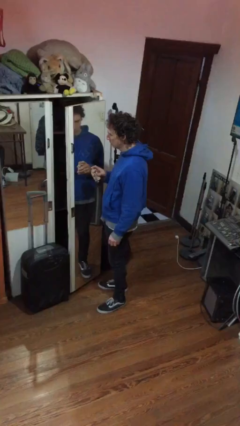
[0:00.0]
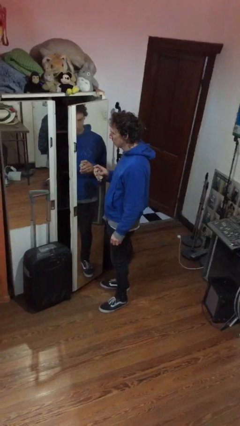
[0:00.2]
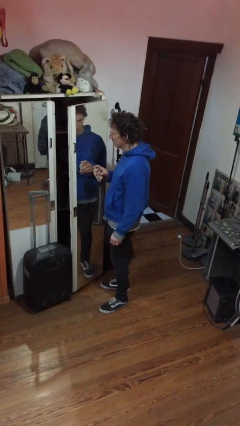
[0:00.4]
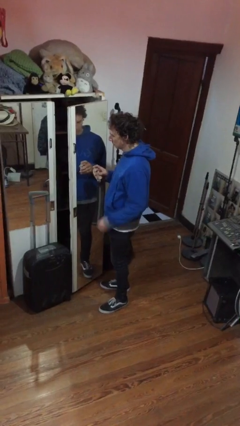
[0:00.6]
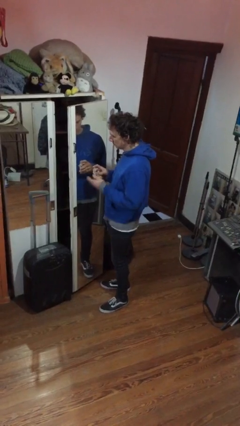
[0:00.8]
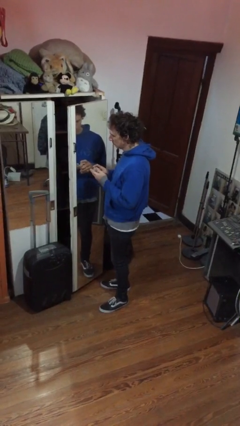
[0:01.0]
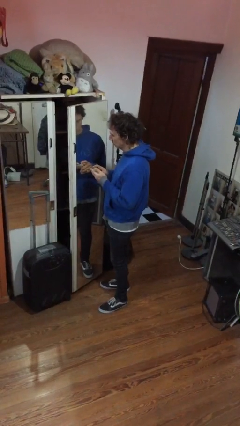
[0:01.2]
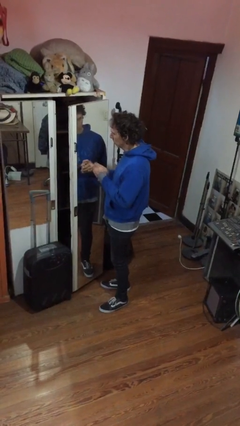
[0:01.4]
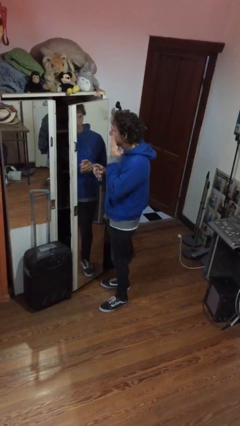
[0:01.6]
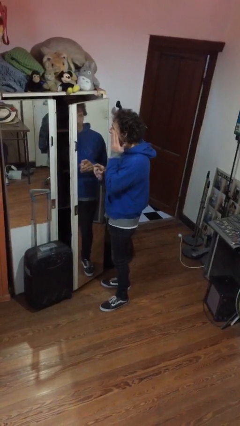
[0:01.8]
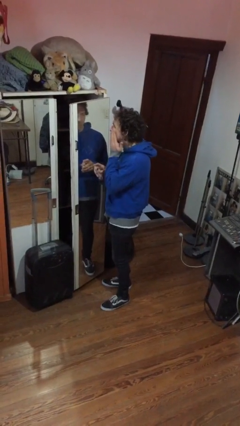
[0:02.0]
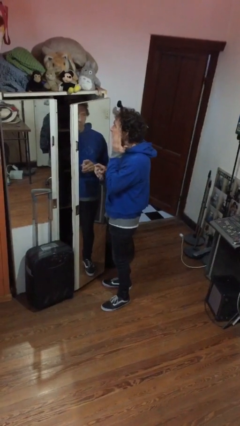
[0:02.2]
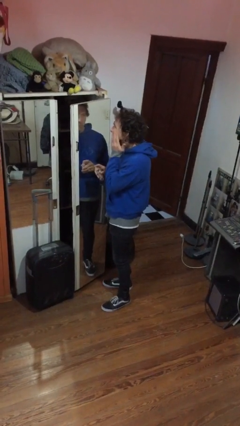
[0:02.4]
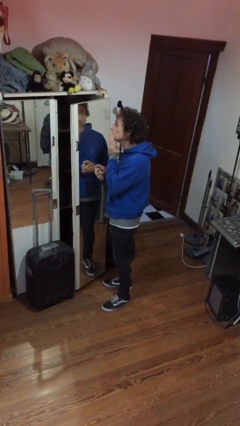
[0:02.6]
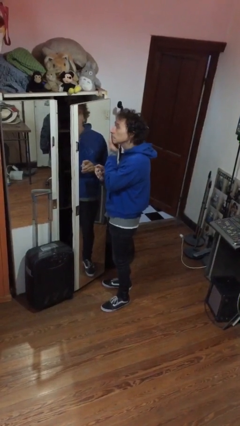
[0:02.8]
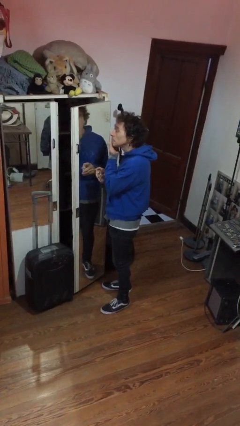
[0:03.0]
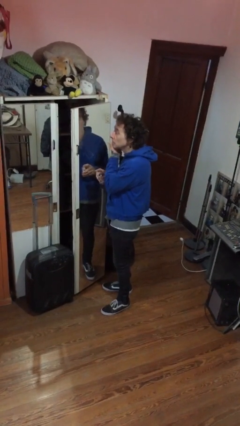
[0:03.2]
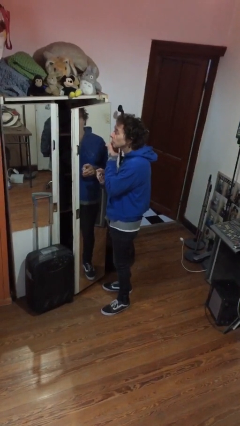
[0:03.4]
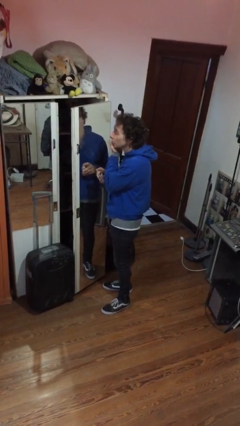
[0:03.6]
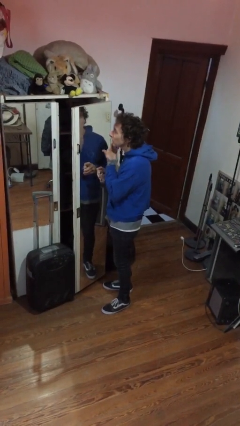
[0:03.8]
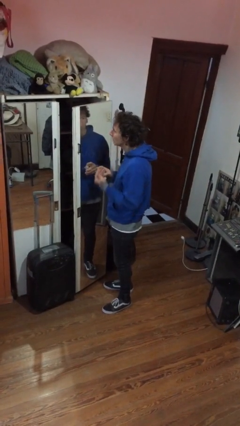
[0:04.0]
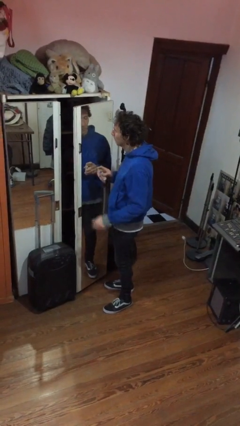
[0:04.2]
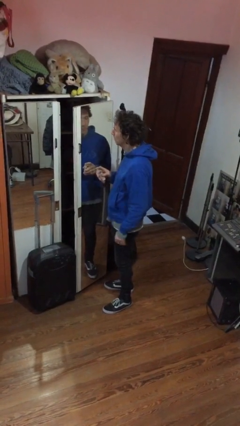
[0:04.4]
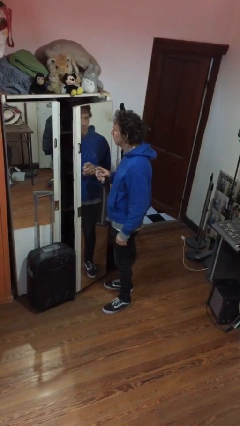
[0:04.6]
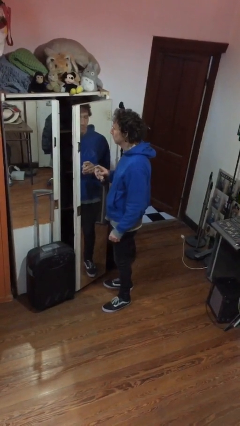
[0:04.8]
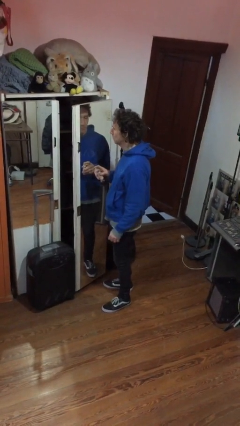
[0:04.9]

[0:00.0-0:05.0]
person applies foundation makeup

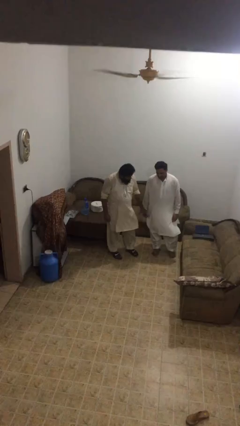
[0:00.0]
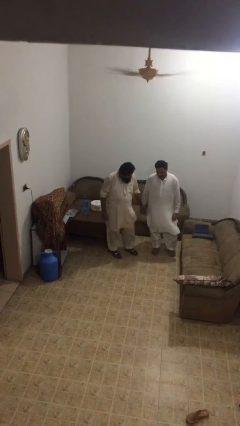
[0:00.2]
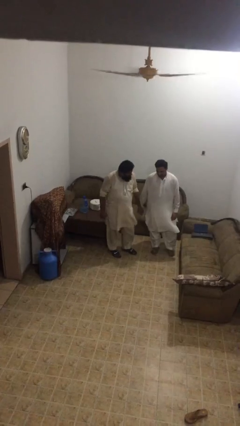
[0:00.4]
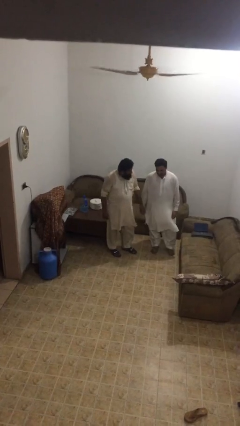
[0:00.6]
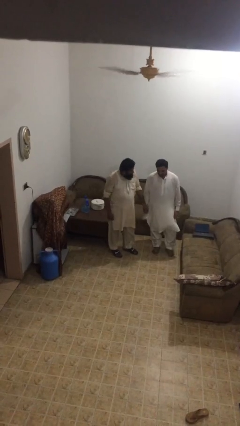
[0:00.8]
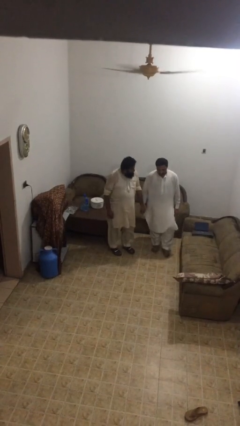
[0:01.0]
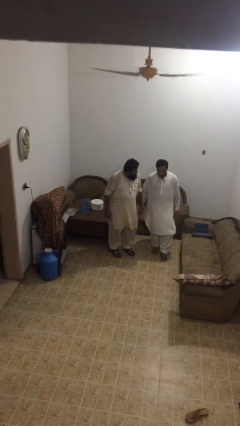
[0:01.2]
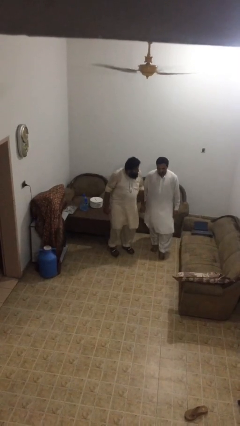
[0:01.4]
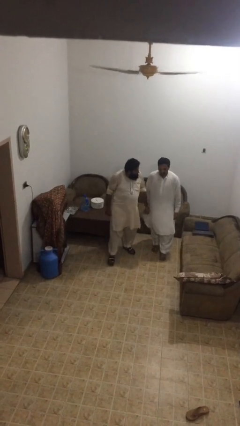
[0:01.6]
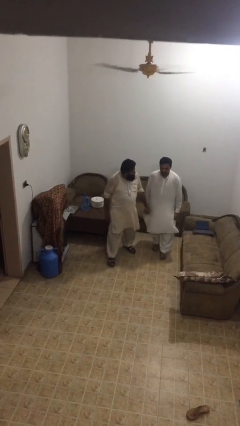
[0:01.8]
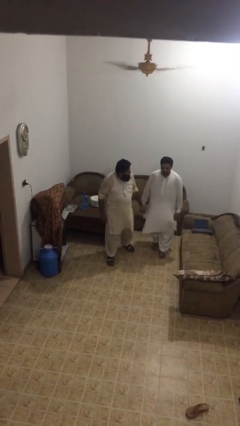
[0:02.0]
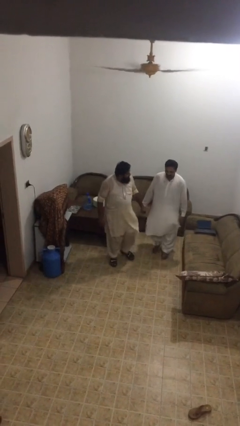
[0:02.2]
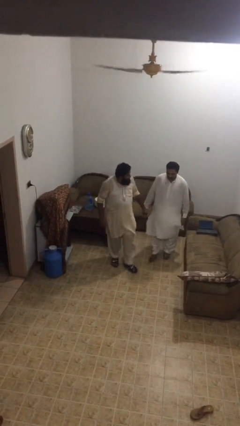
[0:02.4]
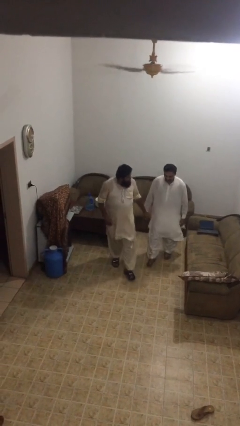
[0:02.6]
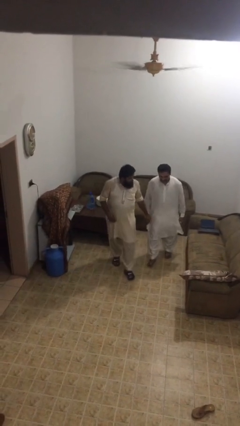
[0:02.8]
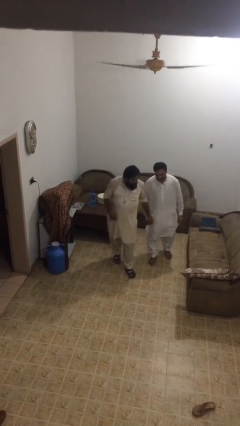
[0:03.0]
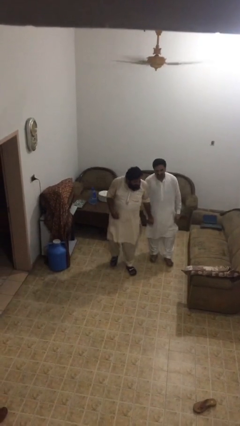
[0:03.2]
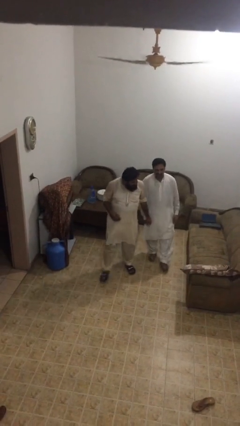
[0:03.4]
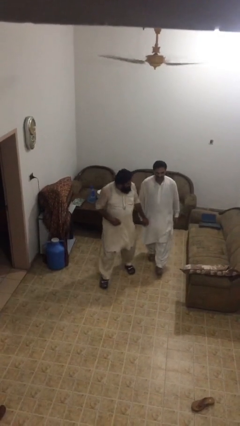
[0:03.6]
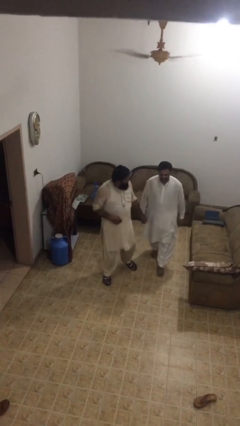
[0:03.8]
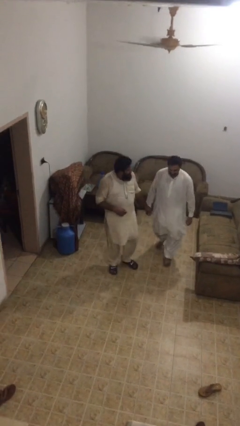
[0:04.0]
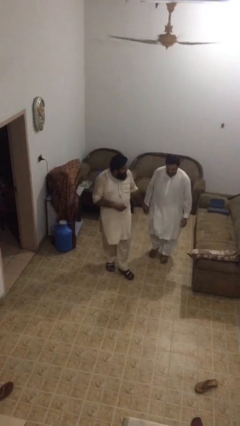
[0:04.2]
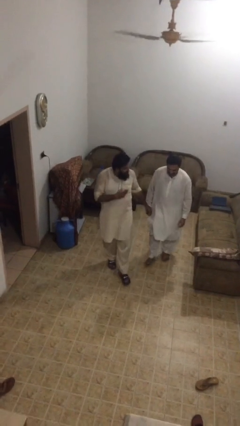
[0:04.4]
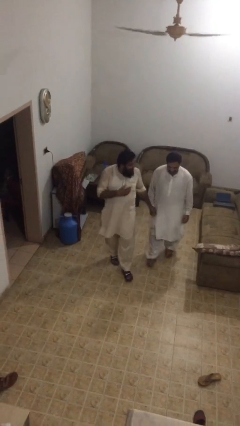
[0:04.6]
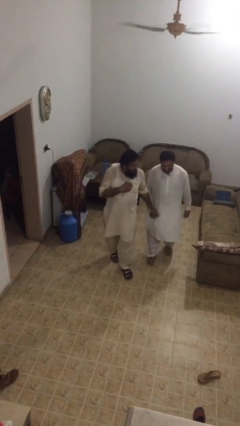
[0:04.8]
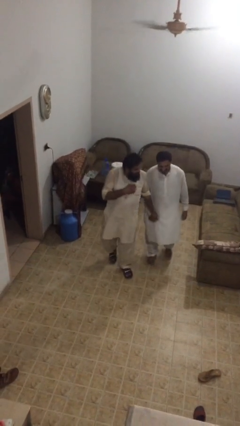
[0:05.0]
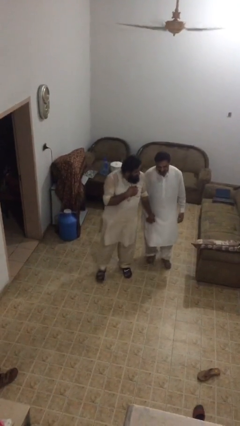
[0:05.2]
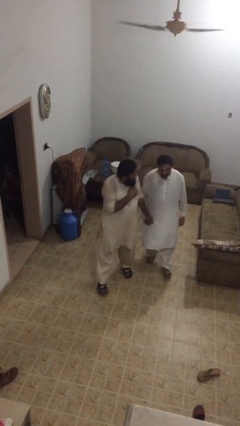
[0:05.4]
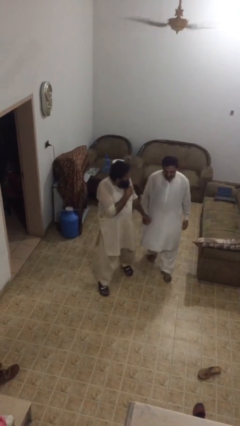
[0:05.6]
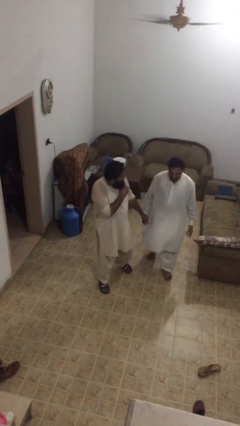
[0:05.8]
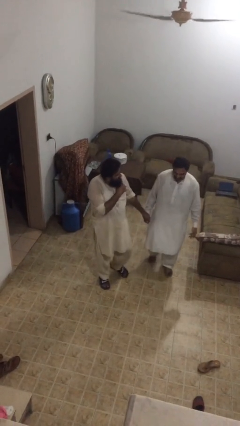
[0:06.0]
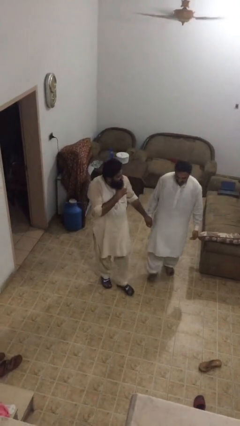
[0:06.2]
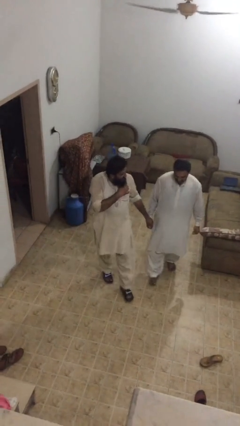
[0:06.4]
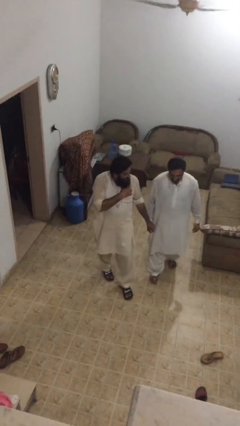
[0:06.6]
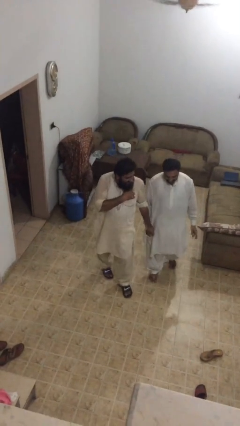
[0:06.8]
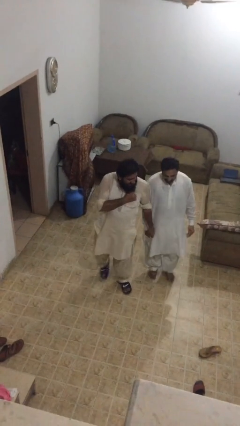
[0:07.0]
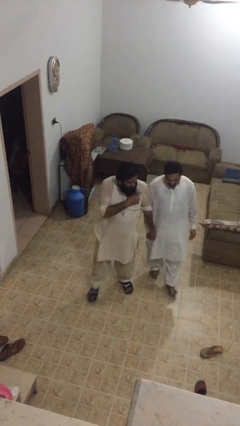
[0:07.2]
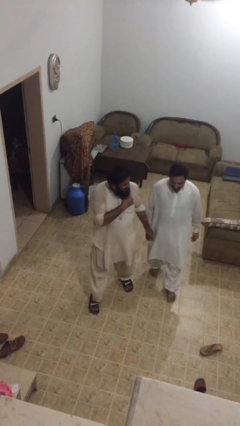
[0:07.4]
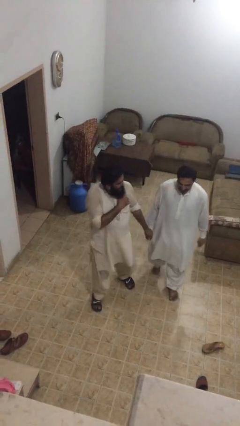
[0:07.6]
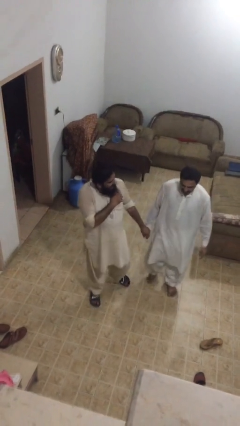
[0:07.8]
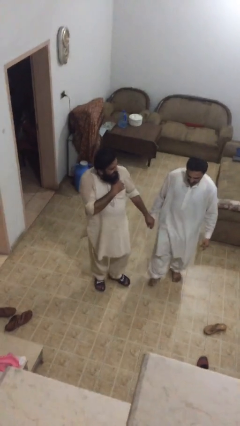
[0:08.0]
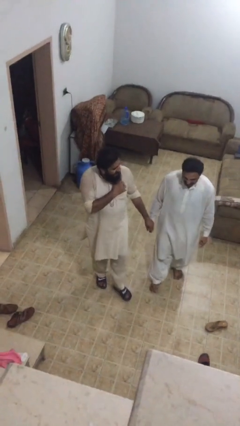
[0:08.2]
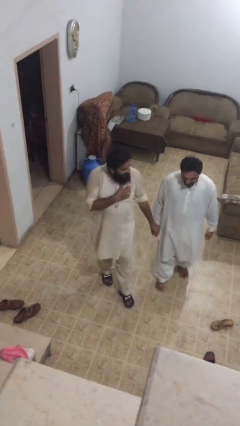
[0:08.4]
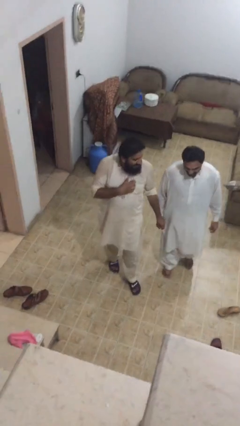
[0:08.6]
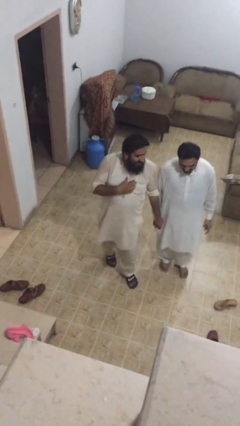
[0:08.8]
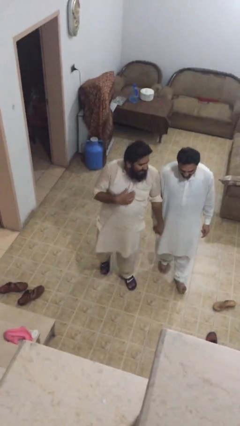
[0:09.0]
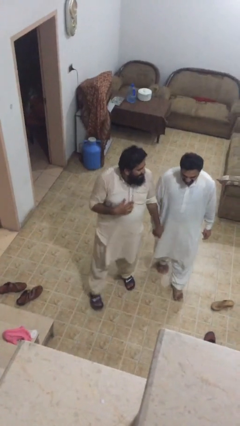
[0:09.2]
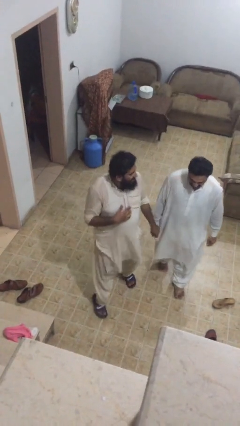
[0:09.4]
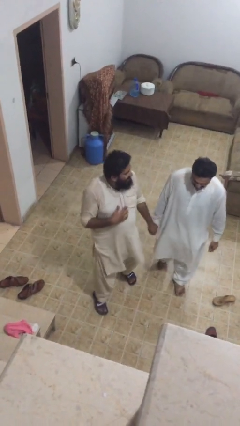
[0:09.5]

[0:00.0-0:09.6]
person holds hand

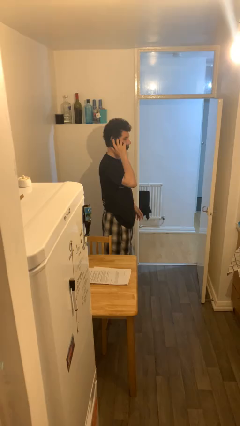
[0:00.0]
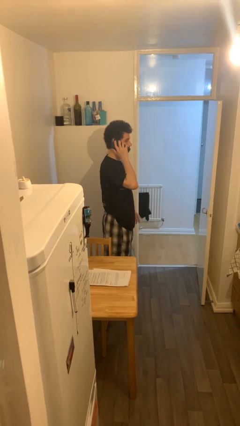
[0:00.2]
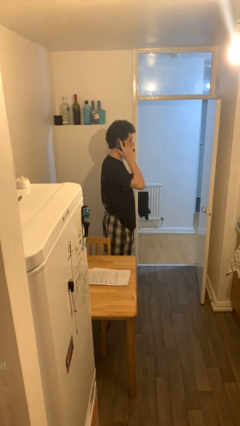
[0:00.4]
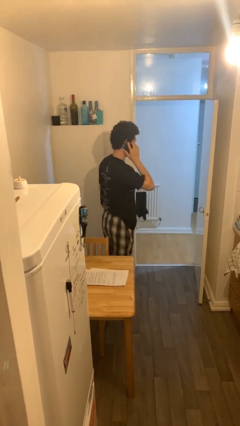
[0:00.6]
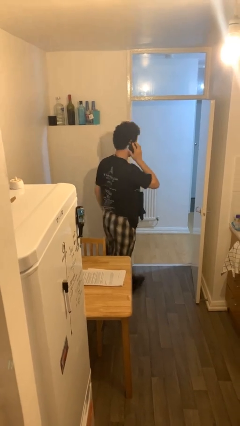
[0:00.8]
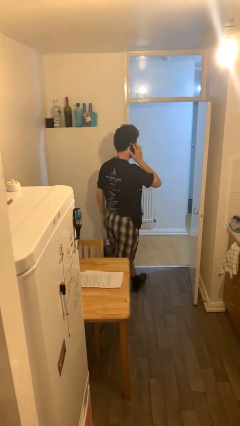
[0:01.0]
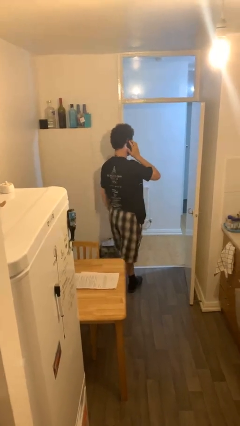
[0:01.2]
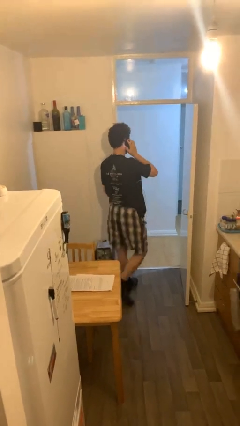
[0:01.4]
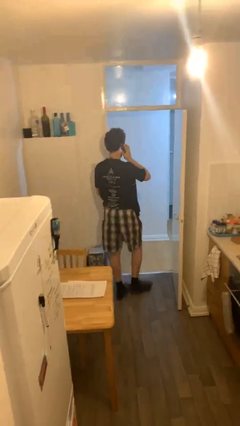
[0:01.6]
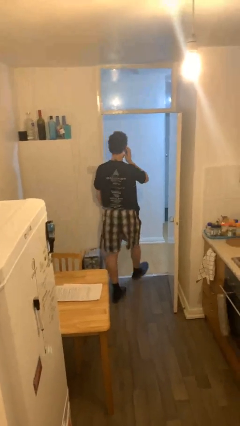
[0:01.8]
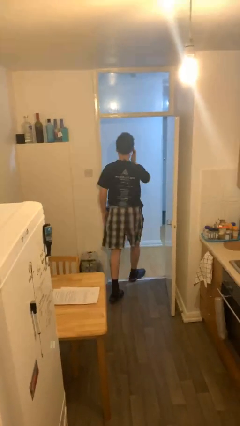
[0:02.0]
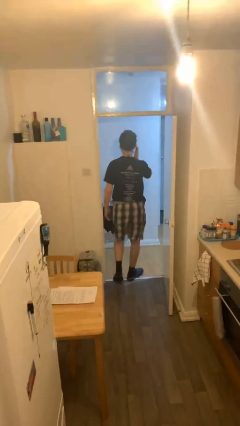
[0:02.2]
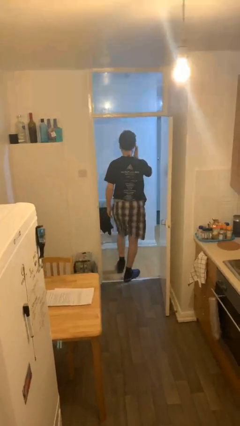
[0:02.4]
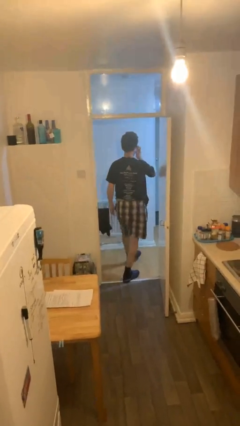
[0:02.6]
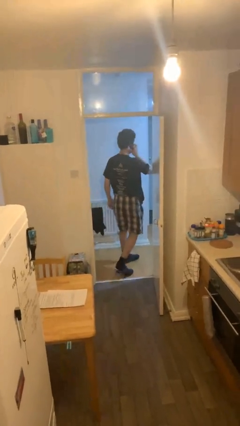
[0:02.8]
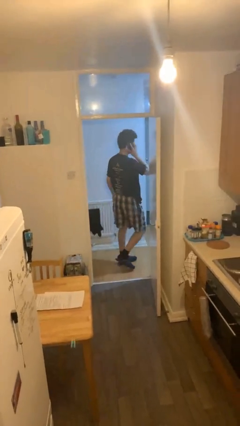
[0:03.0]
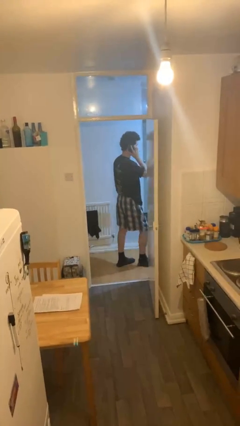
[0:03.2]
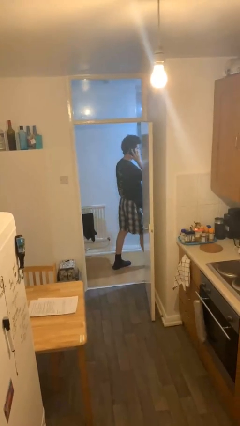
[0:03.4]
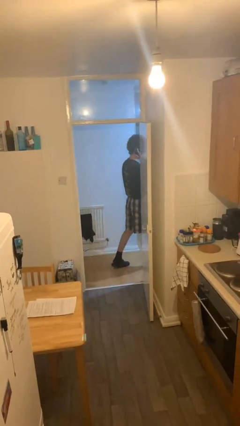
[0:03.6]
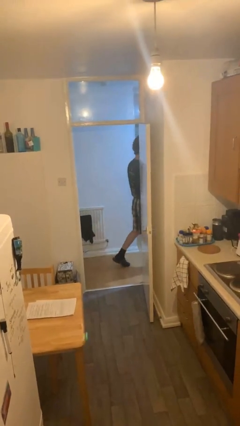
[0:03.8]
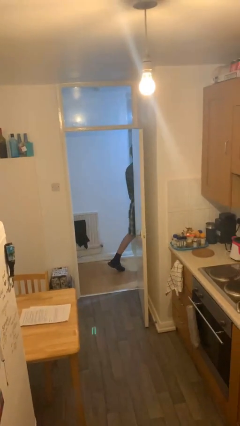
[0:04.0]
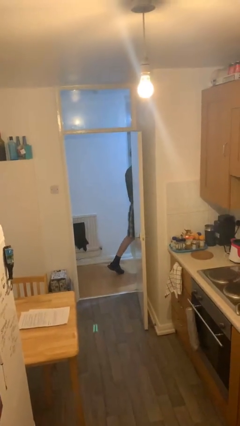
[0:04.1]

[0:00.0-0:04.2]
person exits scene through structure
